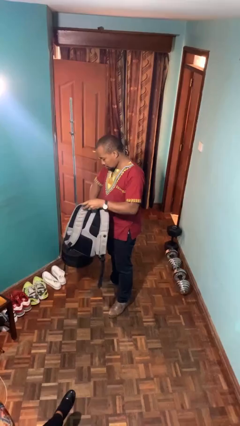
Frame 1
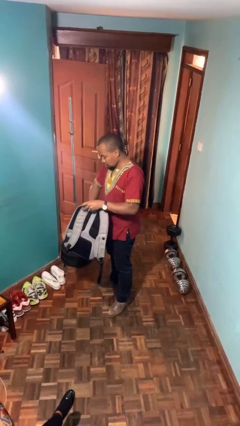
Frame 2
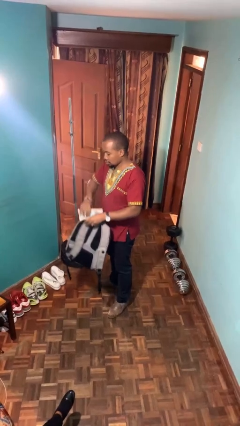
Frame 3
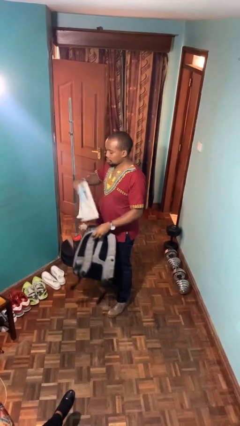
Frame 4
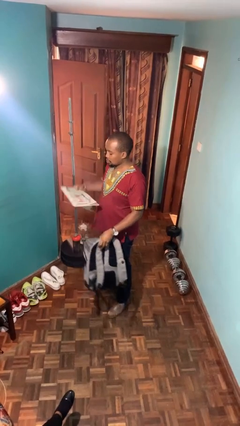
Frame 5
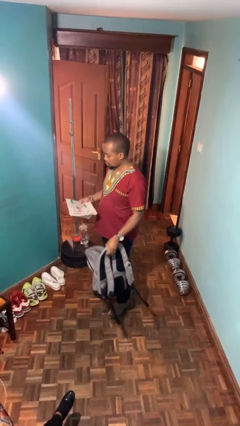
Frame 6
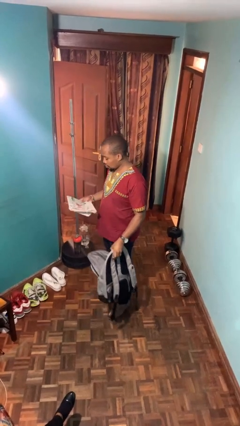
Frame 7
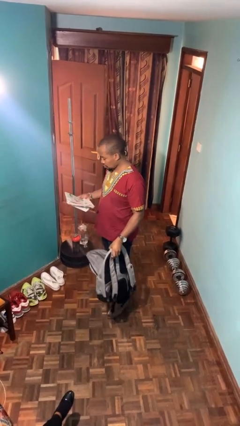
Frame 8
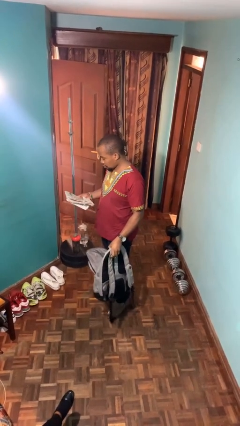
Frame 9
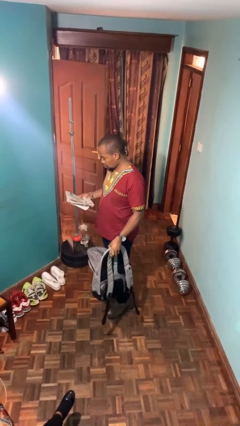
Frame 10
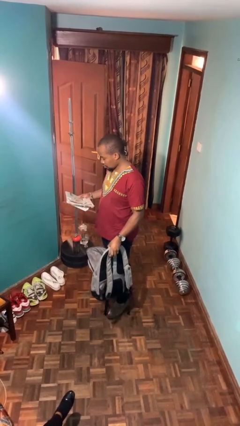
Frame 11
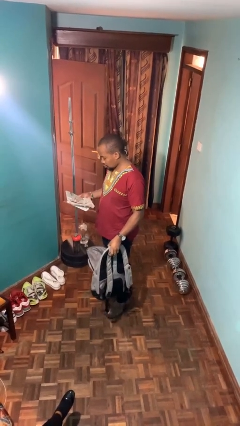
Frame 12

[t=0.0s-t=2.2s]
person takes object from backpack

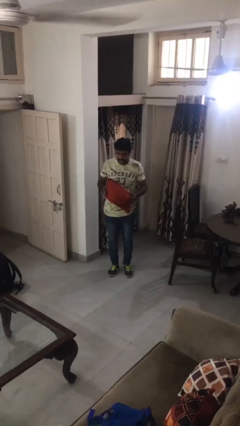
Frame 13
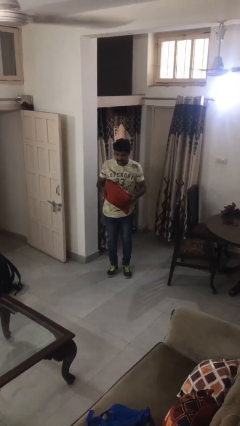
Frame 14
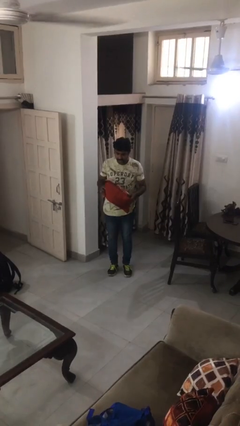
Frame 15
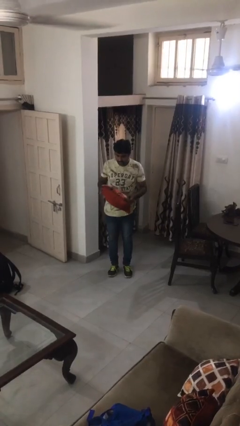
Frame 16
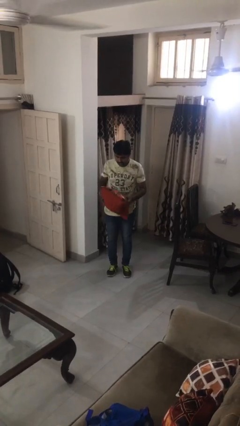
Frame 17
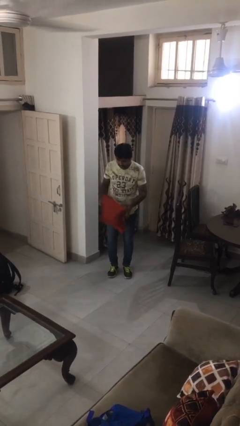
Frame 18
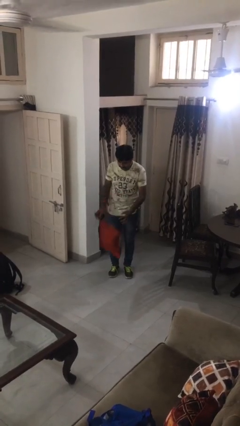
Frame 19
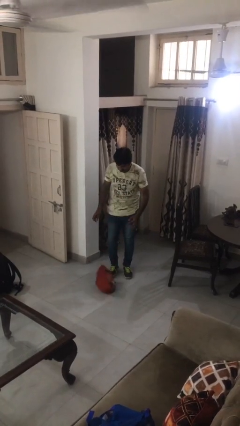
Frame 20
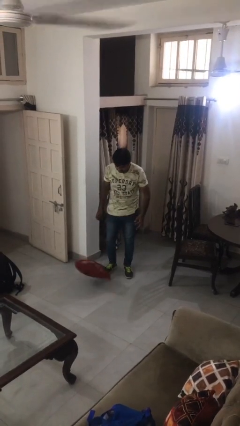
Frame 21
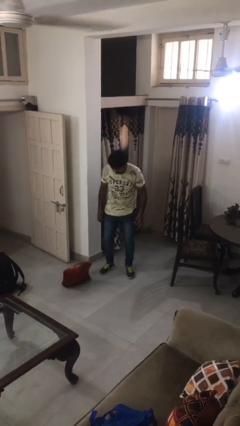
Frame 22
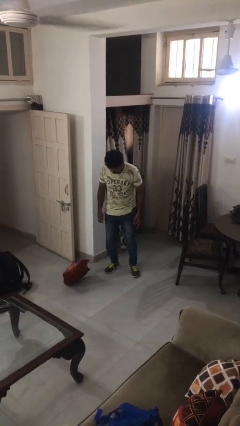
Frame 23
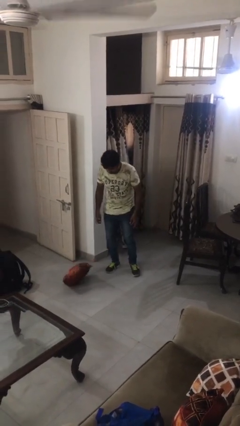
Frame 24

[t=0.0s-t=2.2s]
person drops object

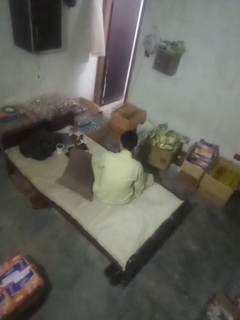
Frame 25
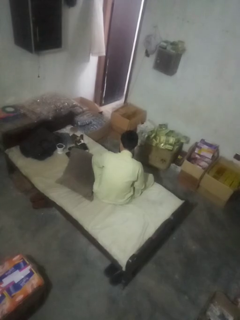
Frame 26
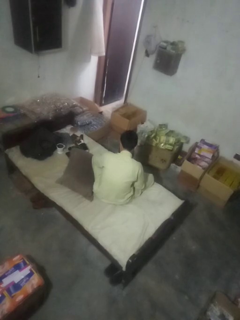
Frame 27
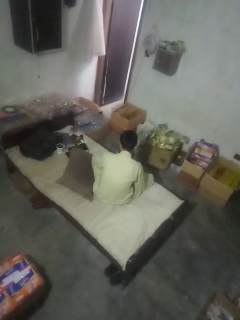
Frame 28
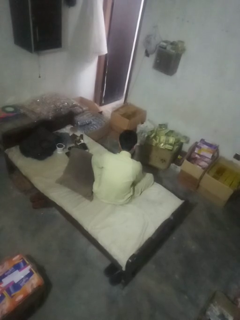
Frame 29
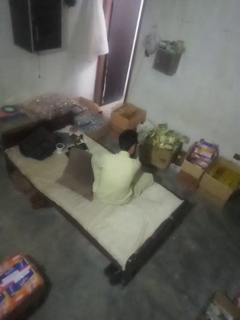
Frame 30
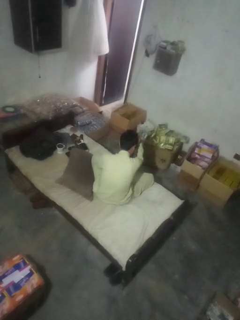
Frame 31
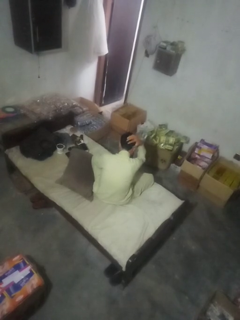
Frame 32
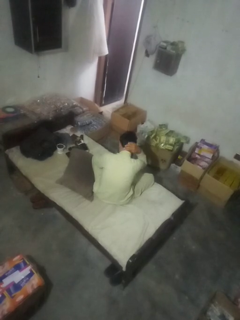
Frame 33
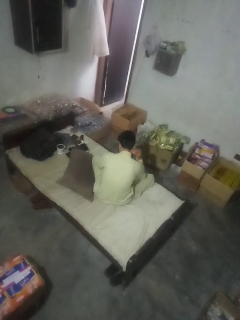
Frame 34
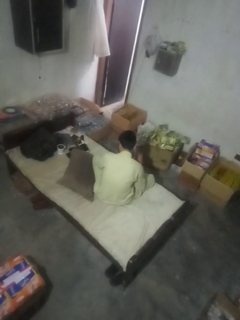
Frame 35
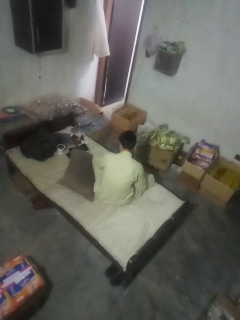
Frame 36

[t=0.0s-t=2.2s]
person strokes hair

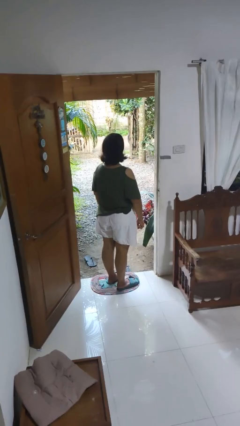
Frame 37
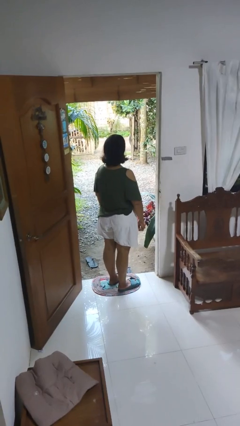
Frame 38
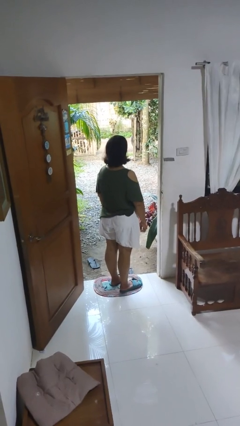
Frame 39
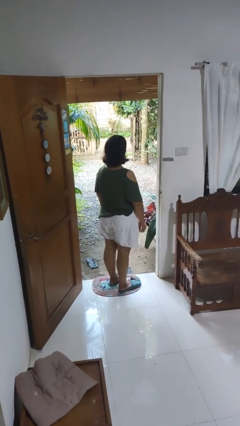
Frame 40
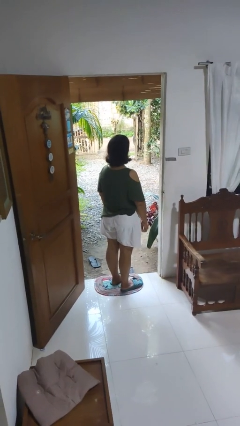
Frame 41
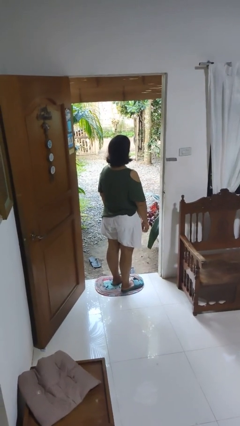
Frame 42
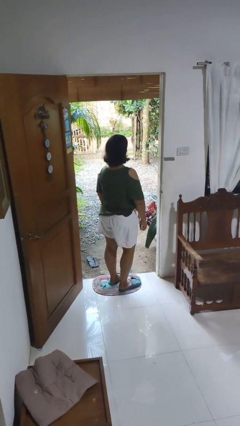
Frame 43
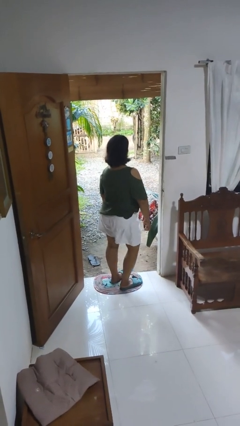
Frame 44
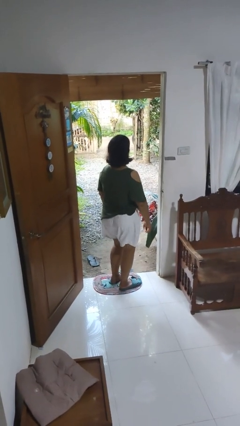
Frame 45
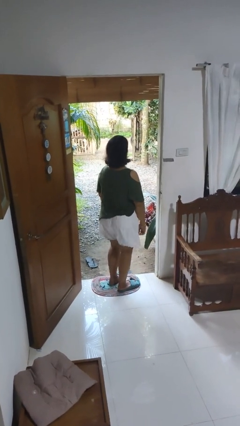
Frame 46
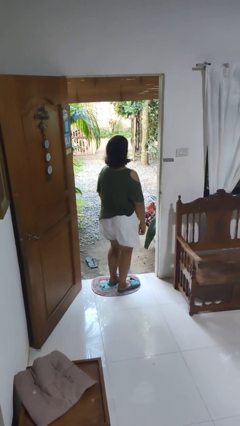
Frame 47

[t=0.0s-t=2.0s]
person wiggles hips

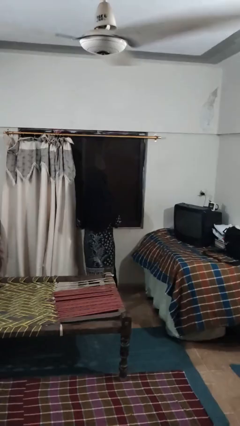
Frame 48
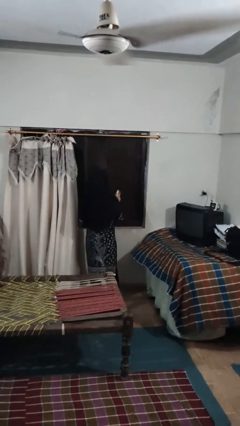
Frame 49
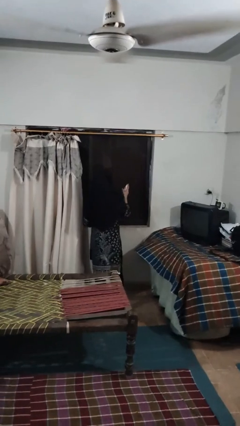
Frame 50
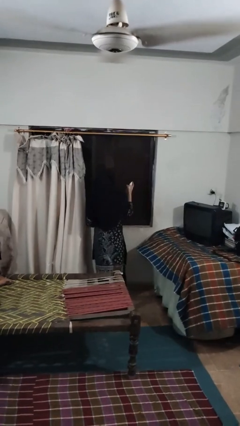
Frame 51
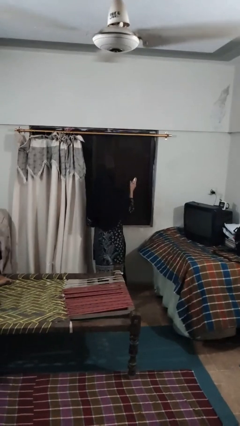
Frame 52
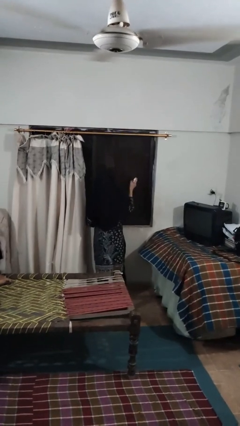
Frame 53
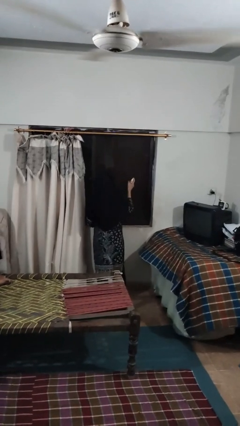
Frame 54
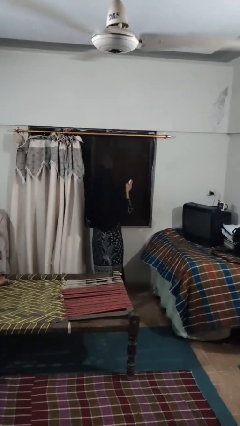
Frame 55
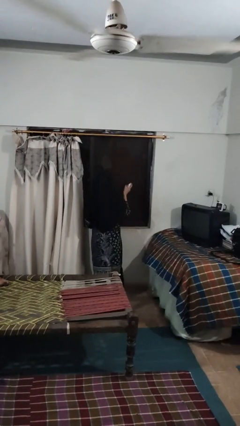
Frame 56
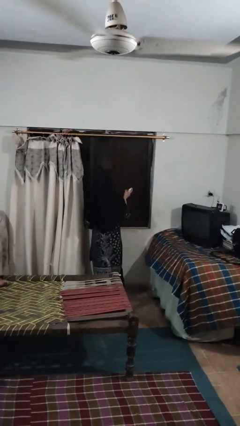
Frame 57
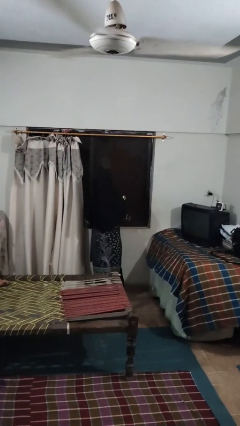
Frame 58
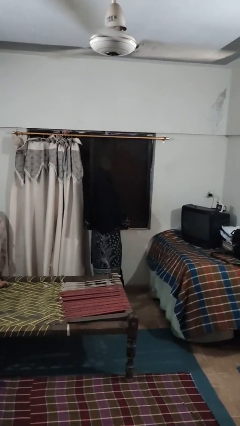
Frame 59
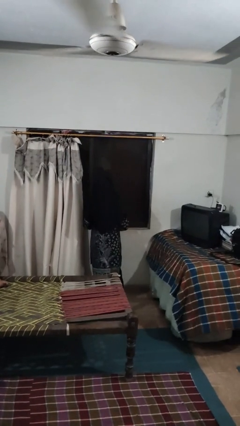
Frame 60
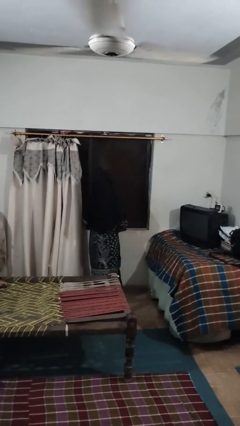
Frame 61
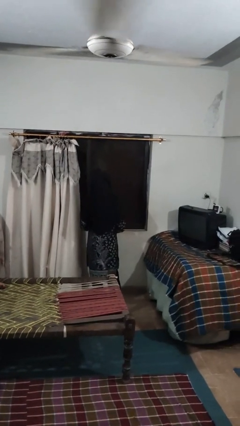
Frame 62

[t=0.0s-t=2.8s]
person sprays from bottle

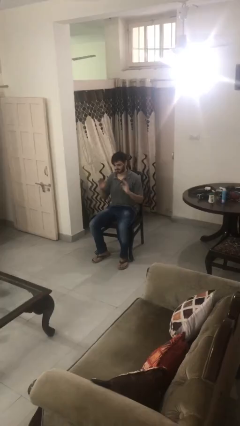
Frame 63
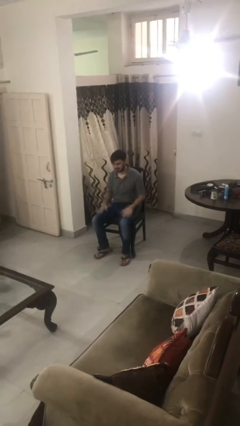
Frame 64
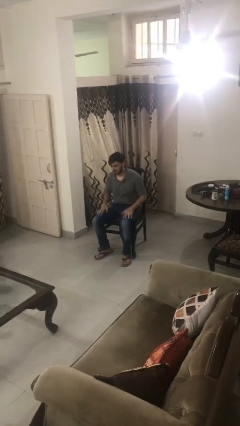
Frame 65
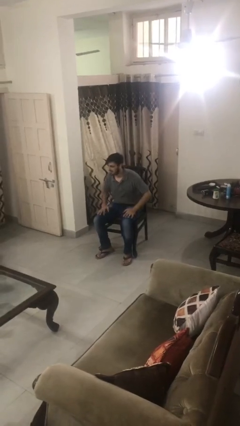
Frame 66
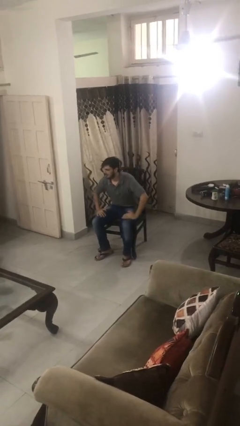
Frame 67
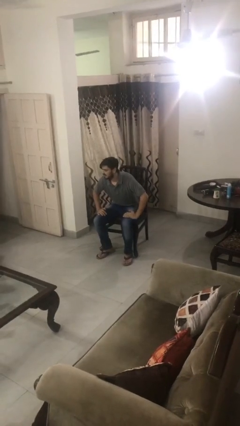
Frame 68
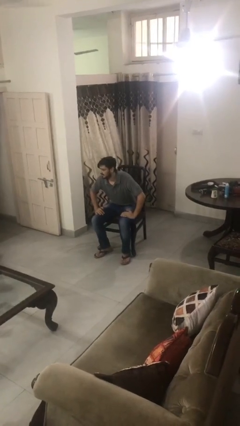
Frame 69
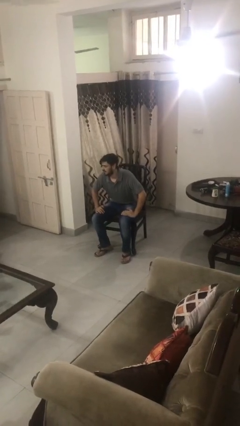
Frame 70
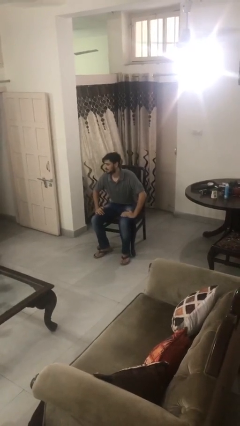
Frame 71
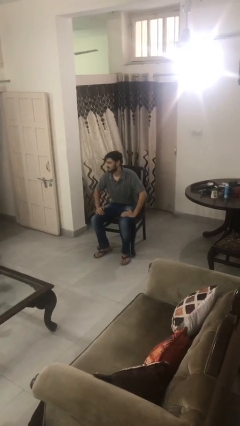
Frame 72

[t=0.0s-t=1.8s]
person slaps hands on thighs

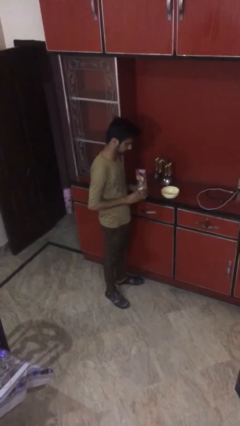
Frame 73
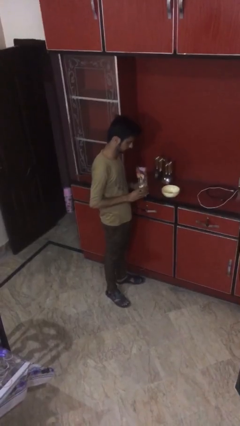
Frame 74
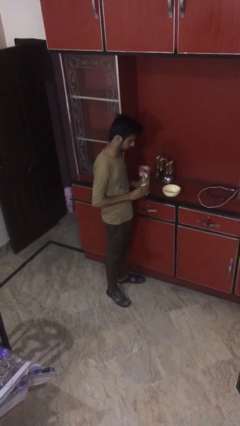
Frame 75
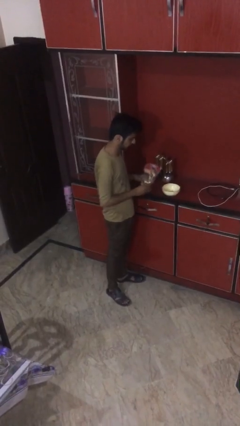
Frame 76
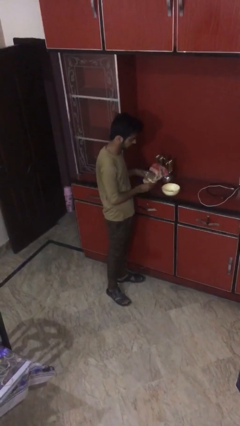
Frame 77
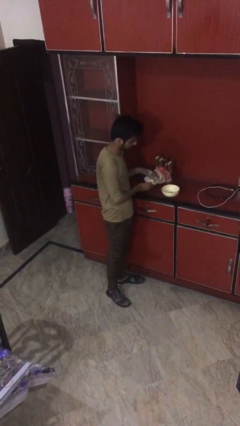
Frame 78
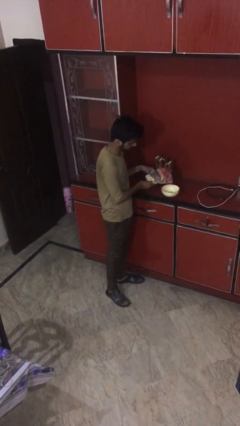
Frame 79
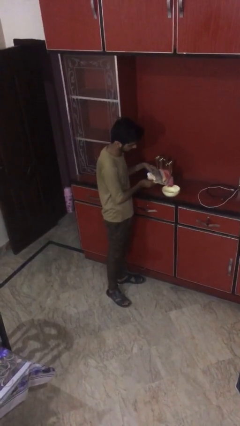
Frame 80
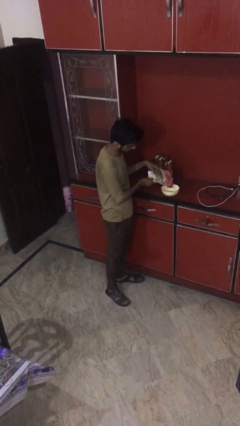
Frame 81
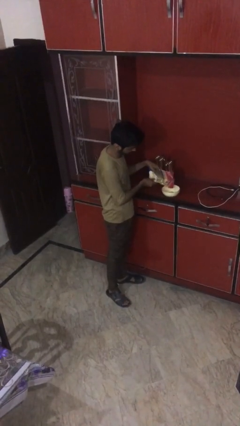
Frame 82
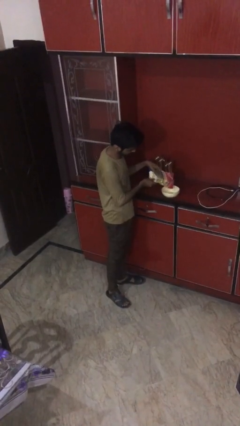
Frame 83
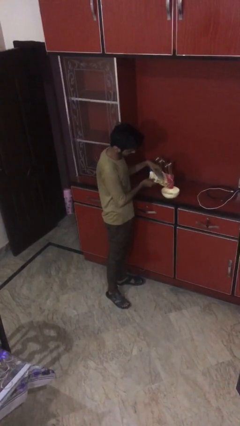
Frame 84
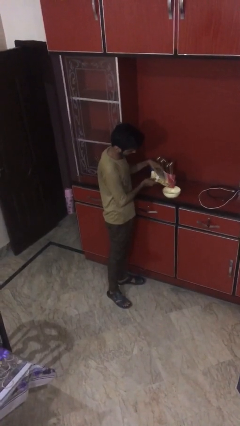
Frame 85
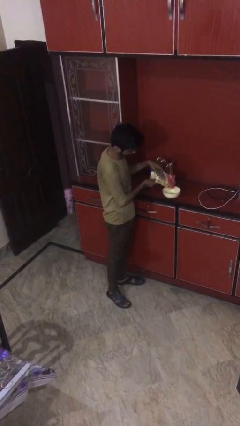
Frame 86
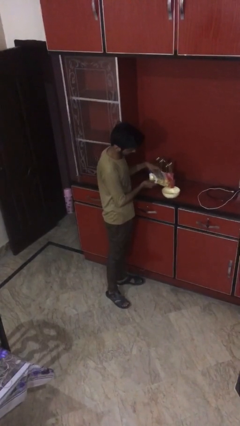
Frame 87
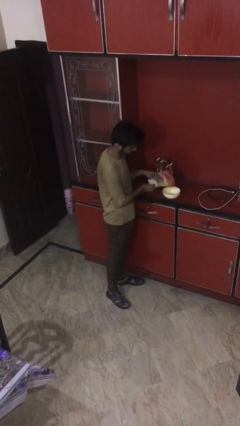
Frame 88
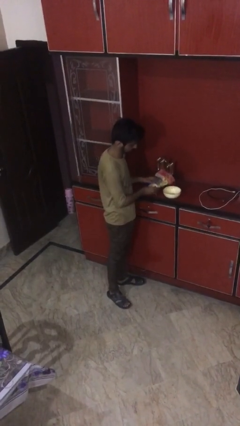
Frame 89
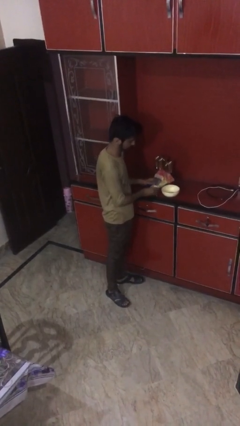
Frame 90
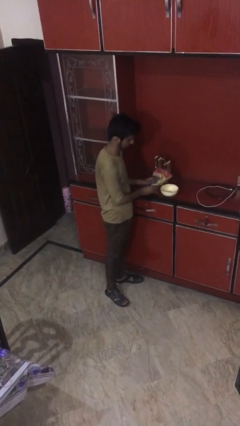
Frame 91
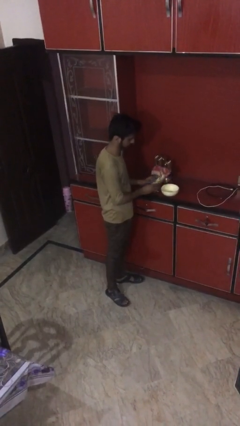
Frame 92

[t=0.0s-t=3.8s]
person pours into bowl

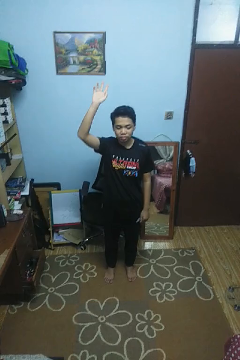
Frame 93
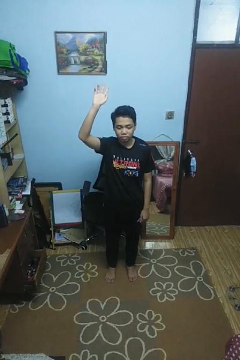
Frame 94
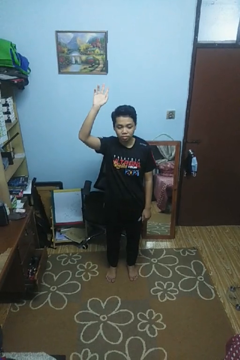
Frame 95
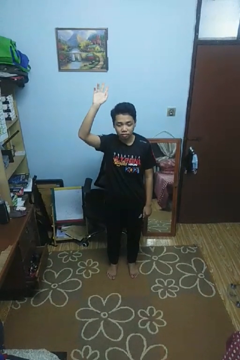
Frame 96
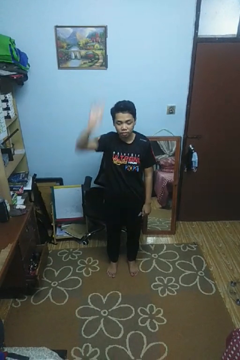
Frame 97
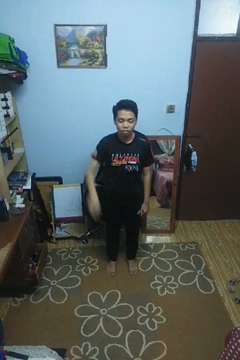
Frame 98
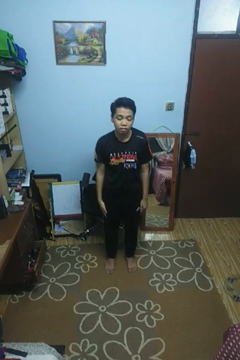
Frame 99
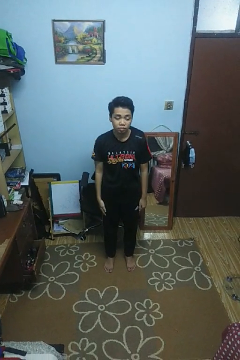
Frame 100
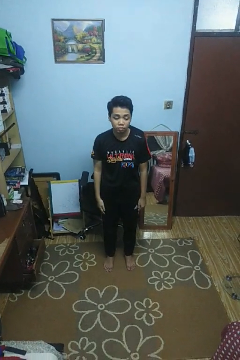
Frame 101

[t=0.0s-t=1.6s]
person gestures lower hand
